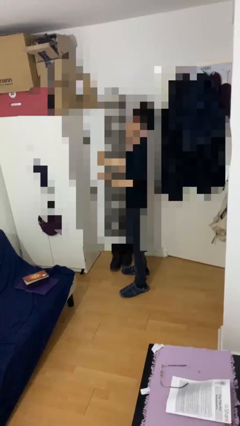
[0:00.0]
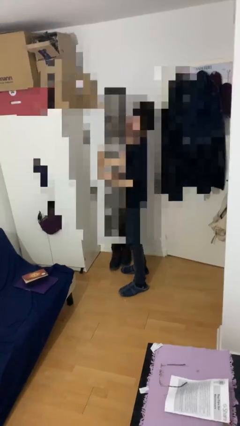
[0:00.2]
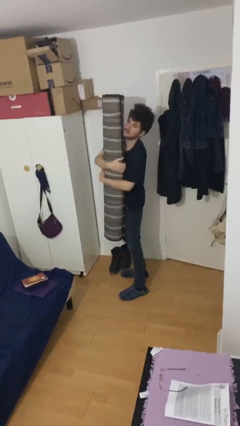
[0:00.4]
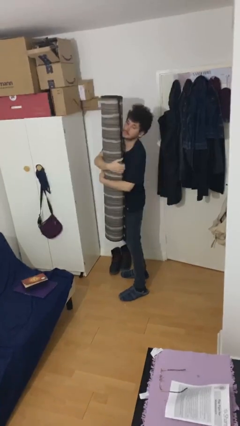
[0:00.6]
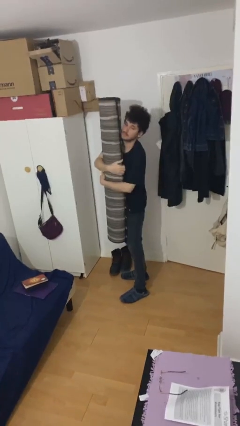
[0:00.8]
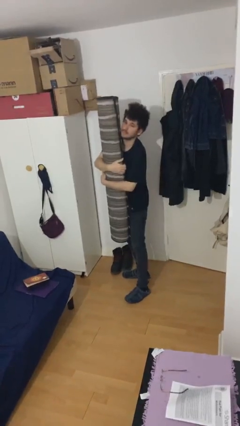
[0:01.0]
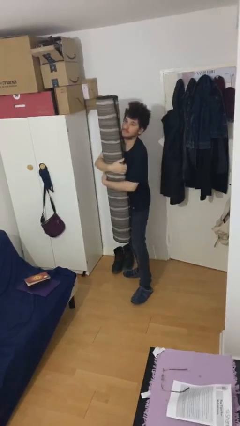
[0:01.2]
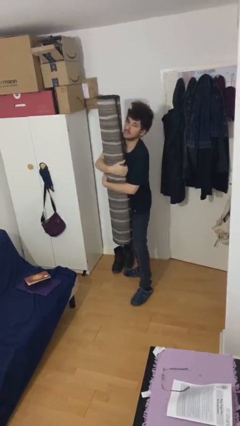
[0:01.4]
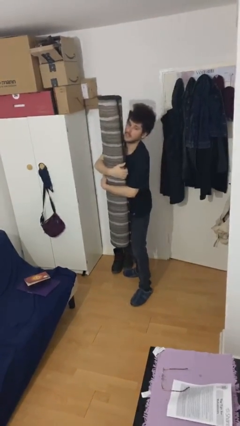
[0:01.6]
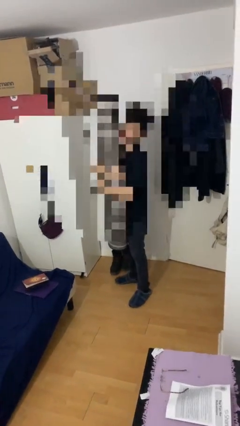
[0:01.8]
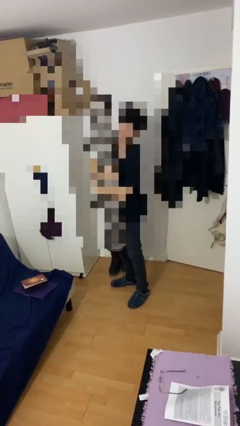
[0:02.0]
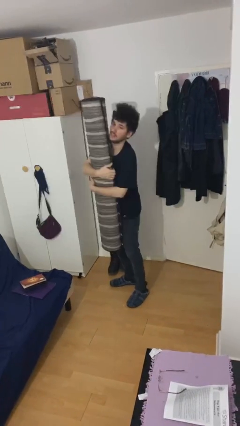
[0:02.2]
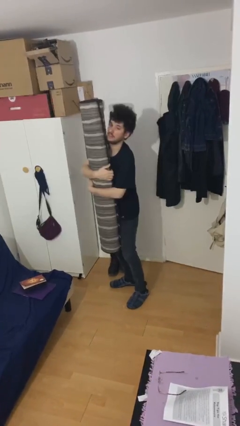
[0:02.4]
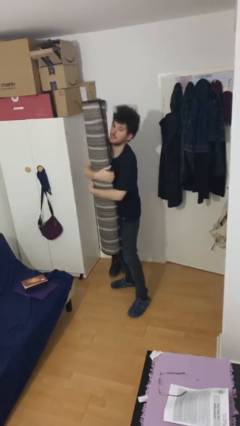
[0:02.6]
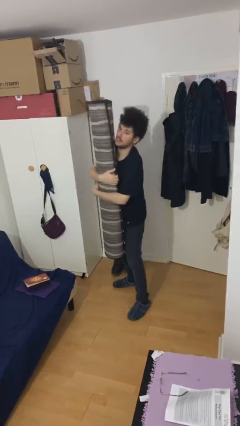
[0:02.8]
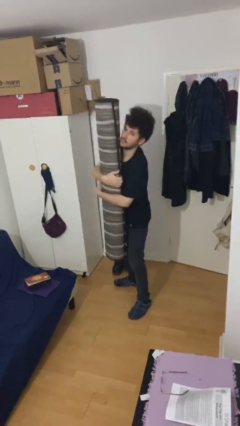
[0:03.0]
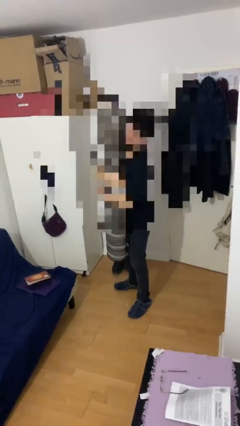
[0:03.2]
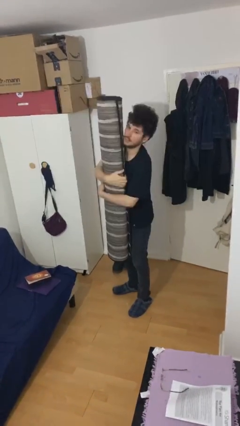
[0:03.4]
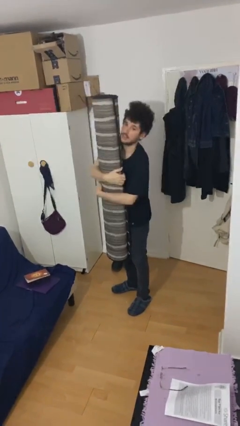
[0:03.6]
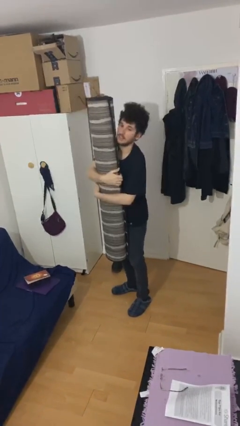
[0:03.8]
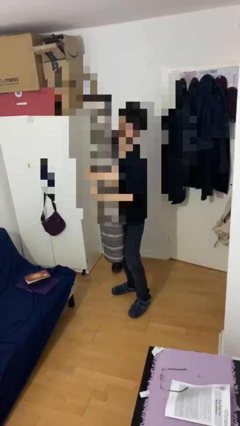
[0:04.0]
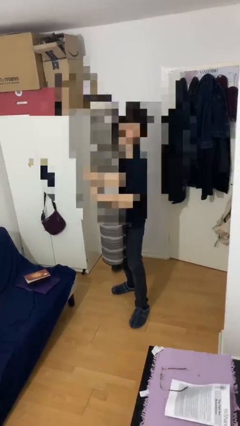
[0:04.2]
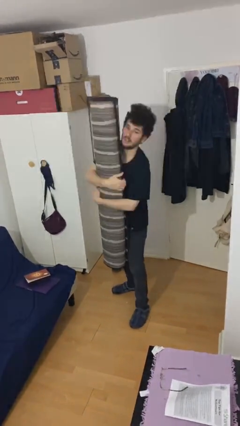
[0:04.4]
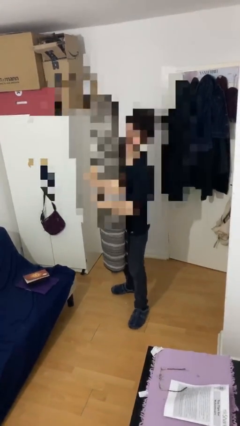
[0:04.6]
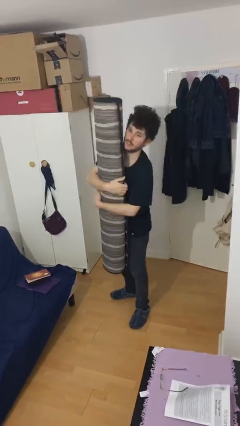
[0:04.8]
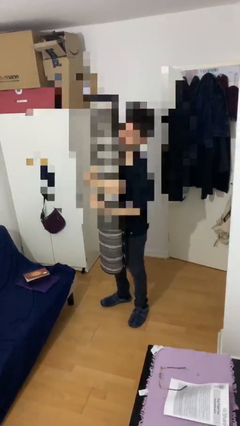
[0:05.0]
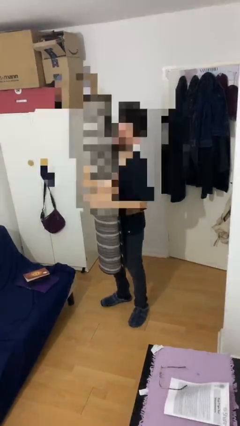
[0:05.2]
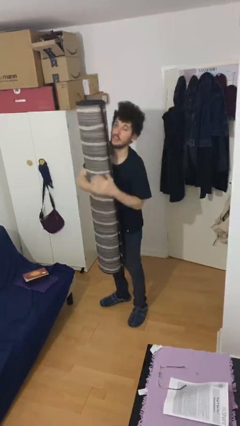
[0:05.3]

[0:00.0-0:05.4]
person carries heavy object

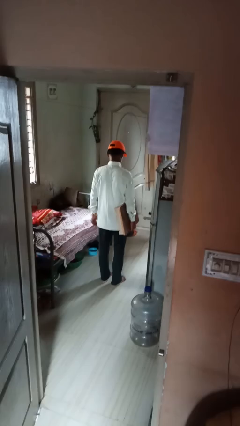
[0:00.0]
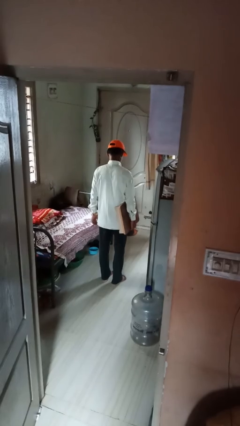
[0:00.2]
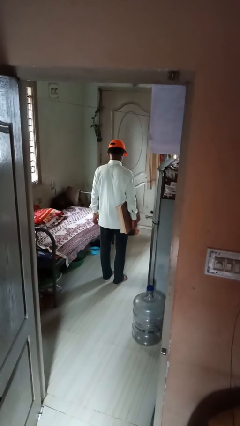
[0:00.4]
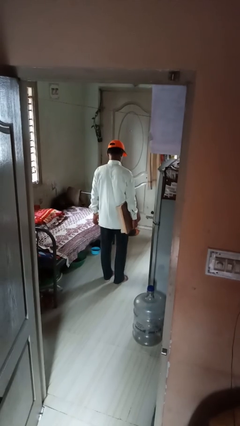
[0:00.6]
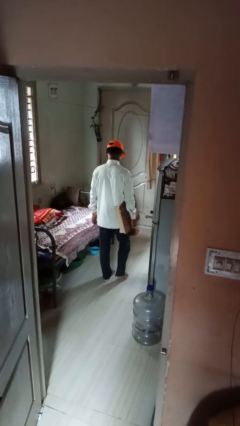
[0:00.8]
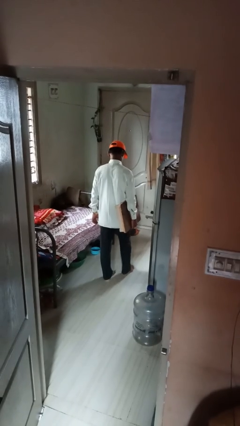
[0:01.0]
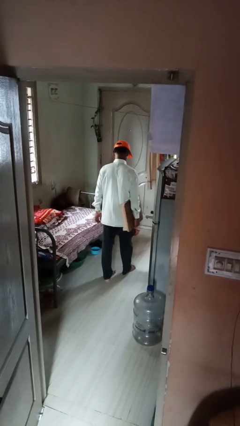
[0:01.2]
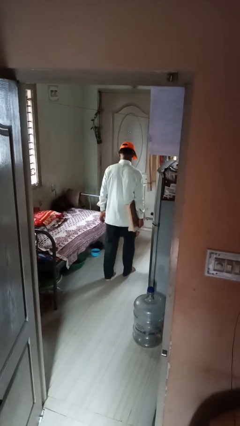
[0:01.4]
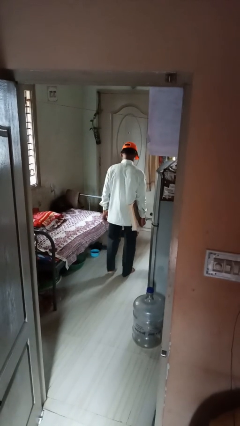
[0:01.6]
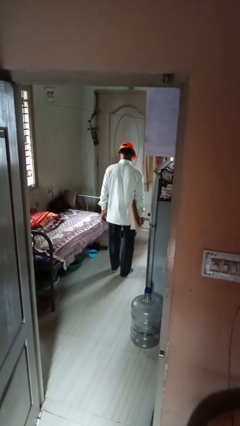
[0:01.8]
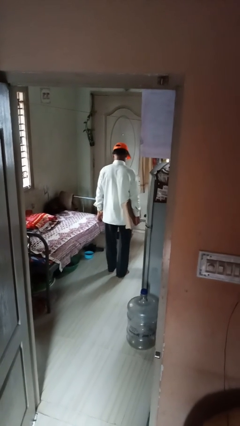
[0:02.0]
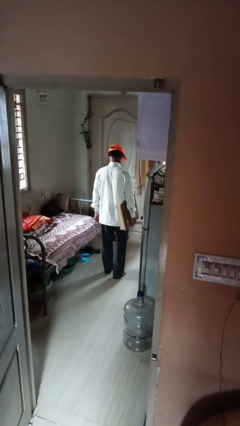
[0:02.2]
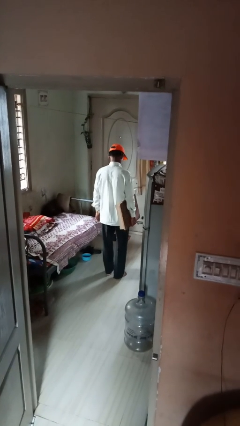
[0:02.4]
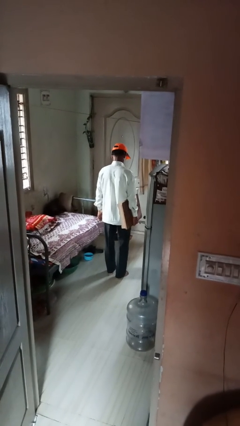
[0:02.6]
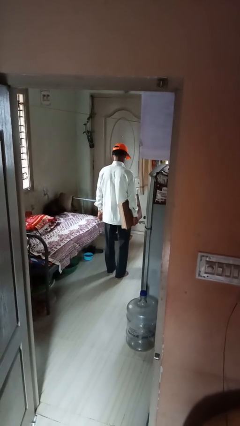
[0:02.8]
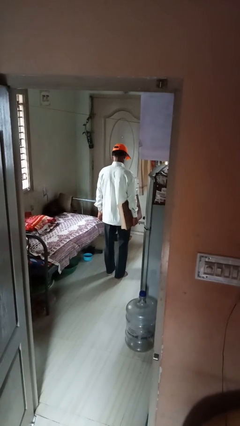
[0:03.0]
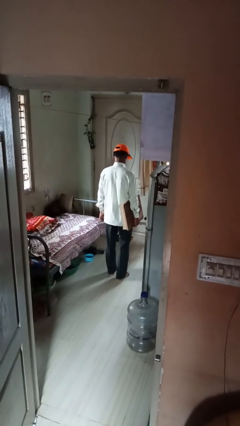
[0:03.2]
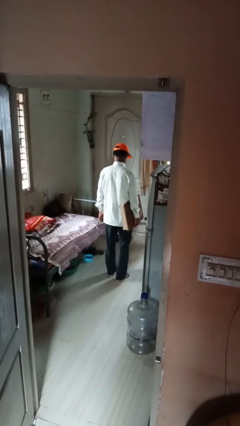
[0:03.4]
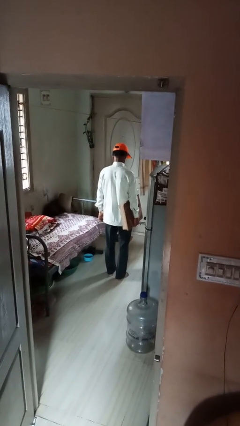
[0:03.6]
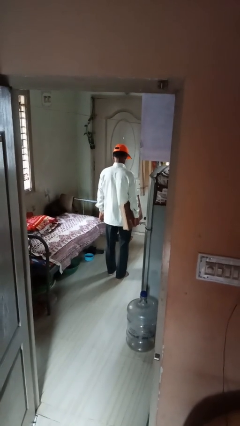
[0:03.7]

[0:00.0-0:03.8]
person carries furniture

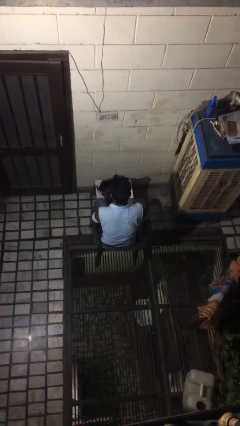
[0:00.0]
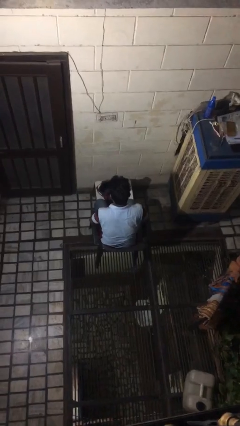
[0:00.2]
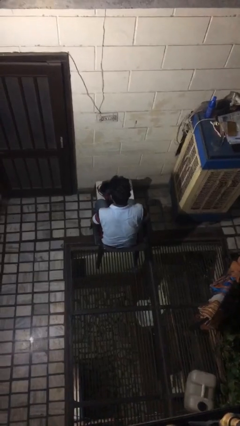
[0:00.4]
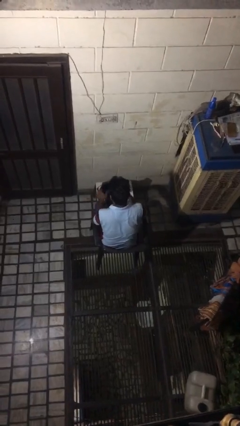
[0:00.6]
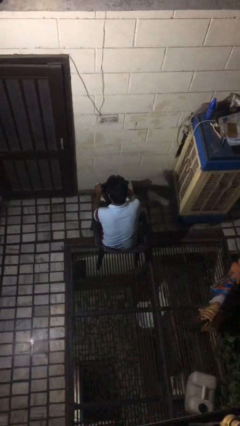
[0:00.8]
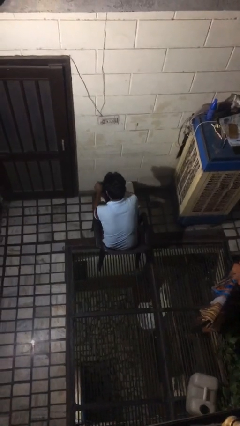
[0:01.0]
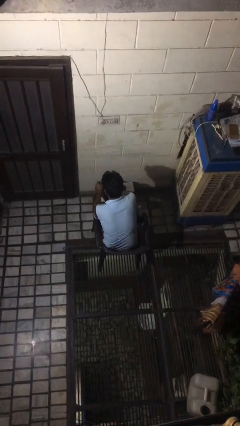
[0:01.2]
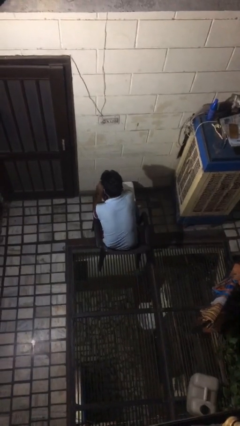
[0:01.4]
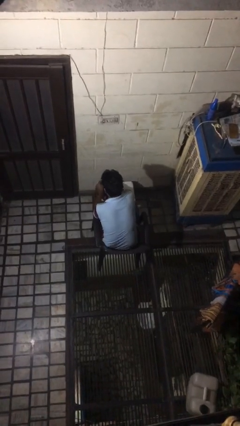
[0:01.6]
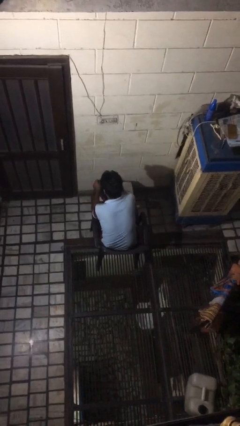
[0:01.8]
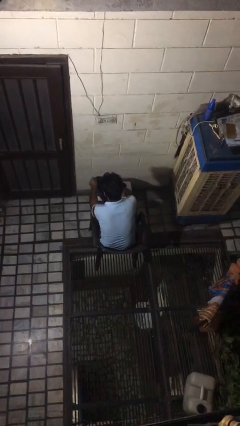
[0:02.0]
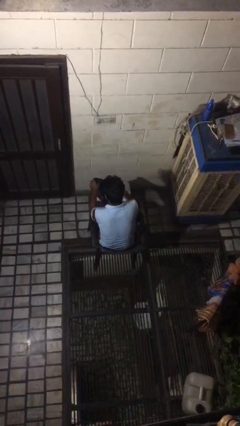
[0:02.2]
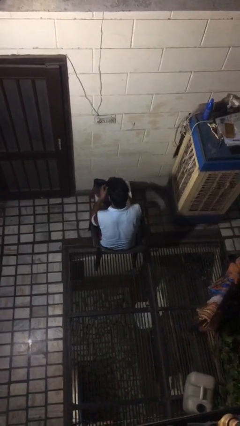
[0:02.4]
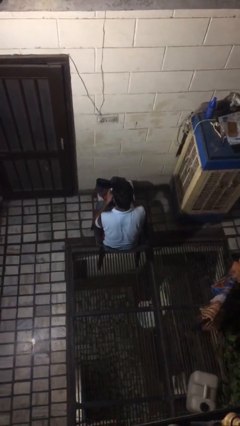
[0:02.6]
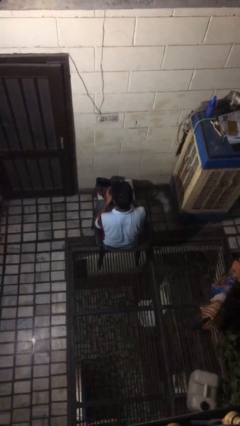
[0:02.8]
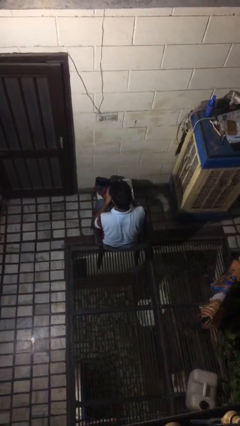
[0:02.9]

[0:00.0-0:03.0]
person takes object from bag

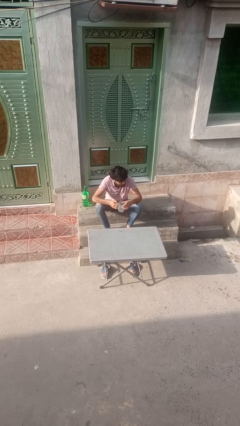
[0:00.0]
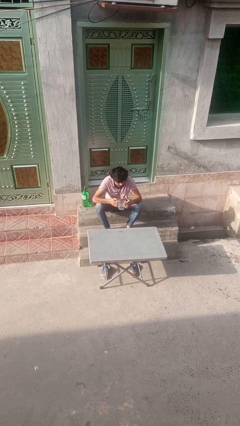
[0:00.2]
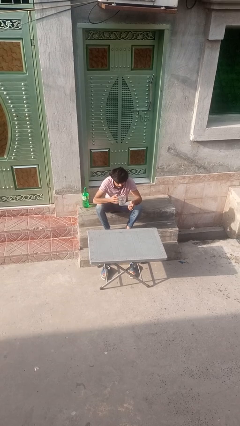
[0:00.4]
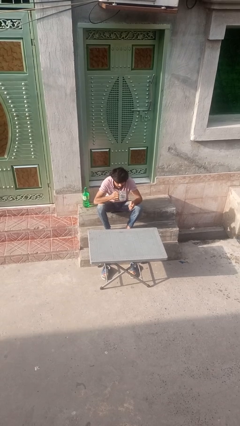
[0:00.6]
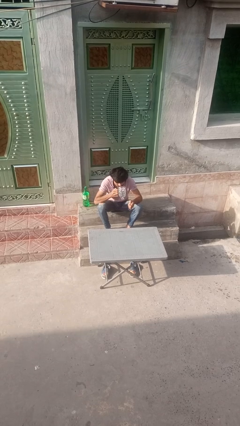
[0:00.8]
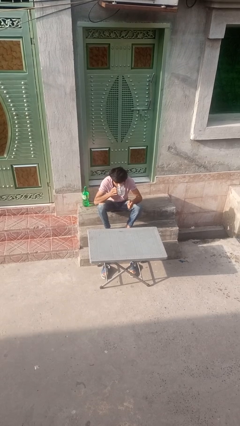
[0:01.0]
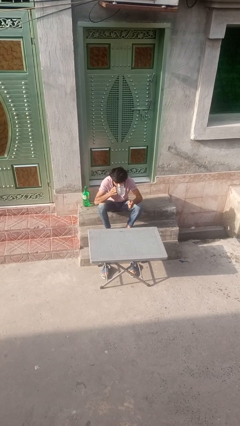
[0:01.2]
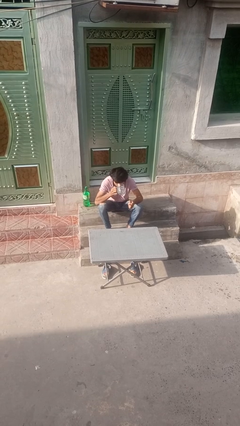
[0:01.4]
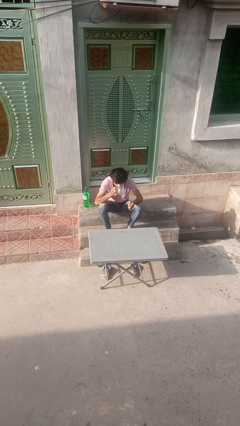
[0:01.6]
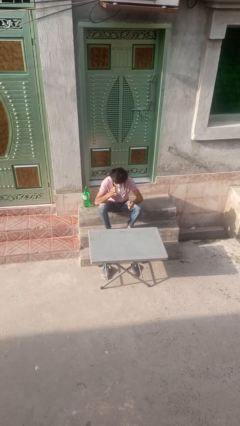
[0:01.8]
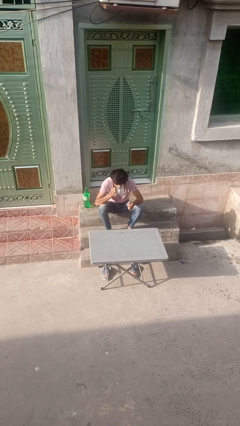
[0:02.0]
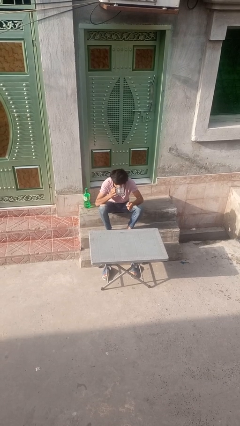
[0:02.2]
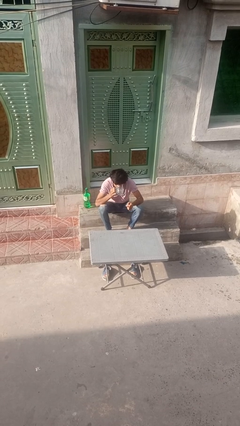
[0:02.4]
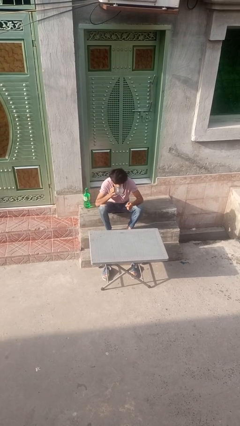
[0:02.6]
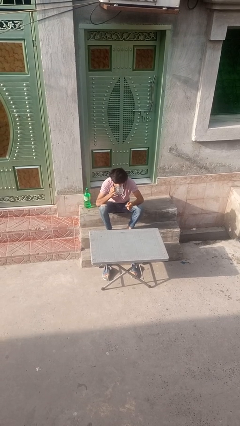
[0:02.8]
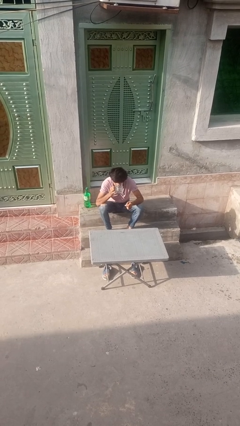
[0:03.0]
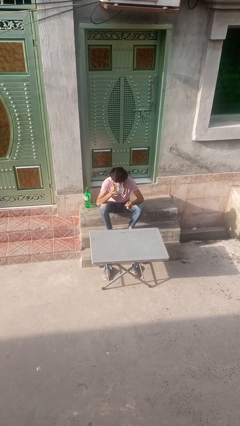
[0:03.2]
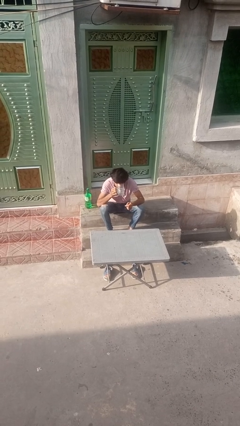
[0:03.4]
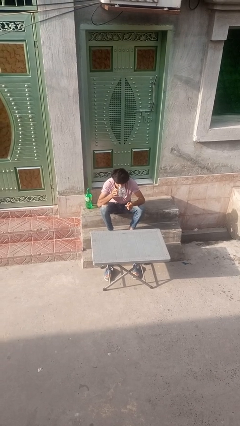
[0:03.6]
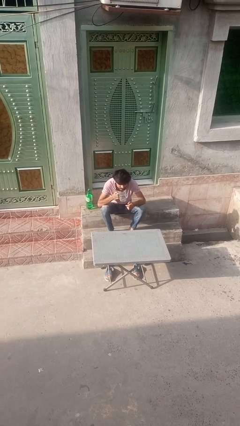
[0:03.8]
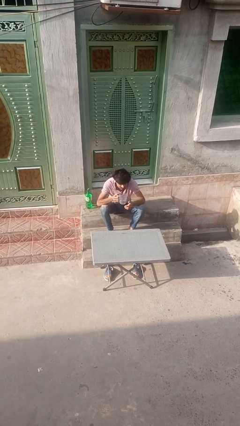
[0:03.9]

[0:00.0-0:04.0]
person drinks from mug

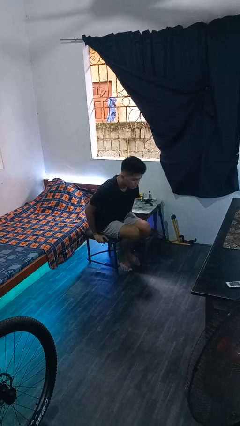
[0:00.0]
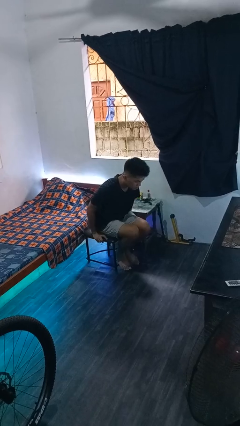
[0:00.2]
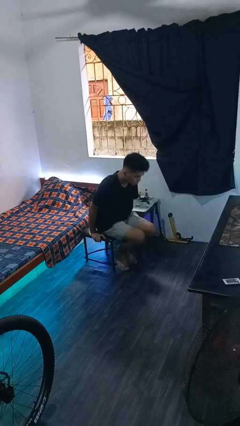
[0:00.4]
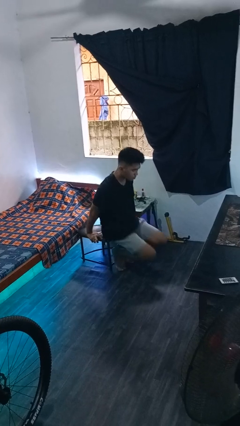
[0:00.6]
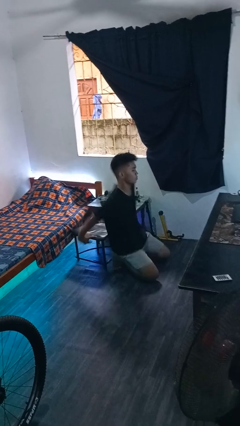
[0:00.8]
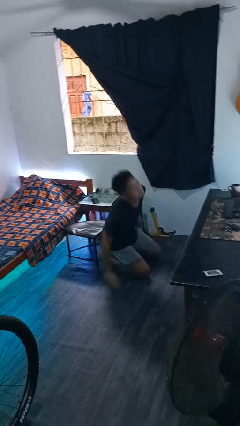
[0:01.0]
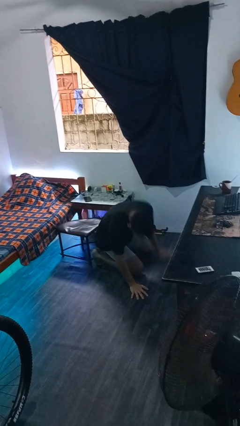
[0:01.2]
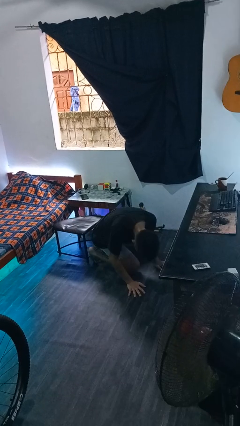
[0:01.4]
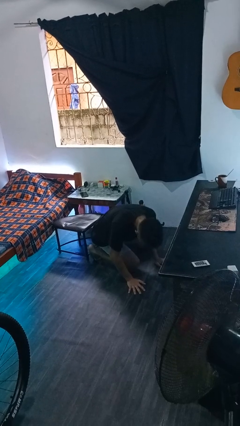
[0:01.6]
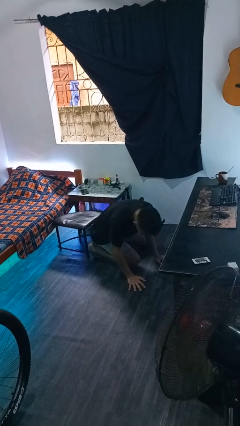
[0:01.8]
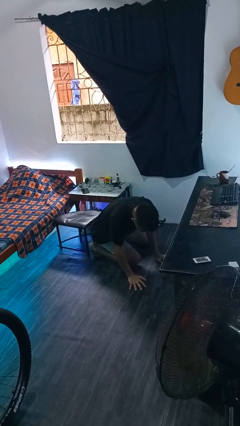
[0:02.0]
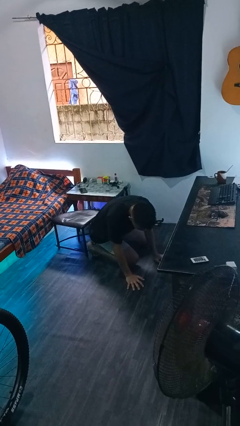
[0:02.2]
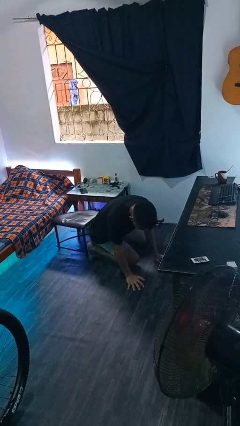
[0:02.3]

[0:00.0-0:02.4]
person falls from chair
